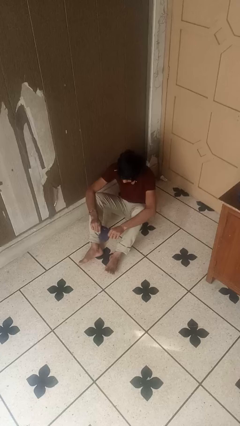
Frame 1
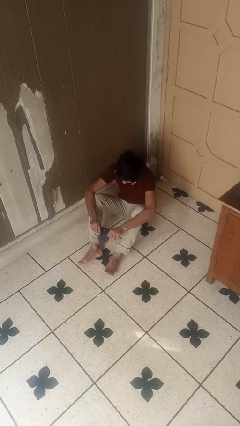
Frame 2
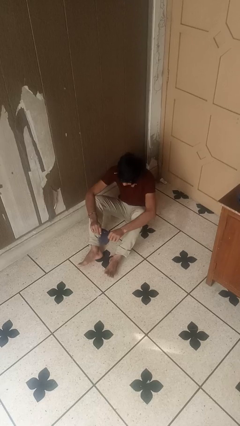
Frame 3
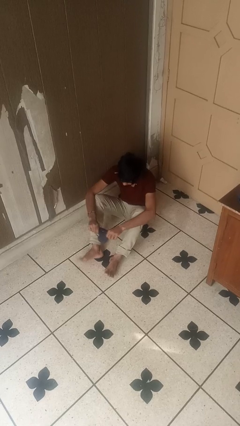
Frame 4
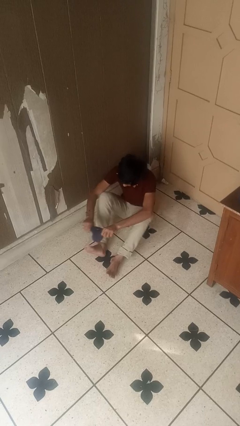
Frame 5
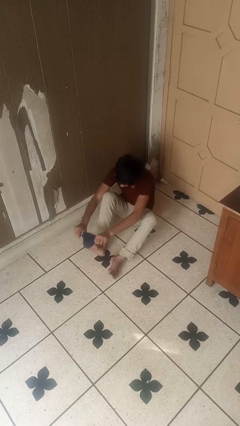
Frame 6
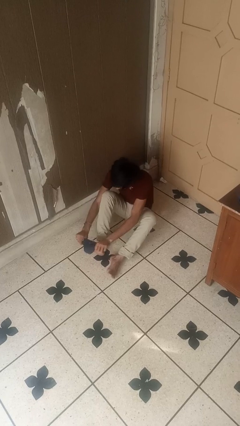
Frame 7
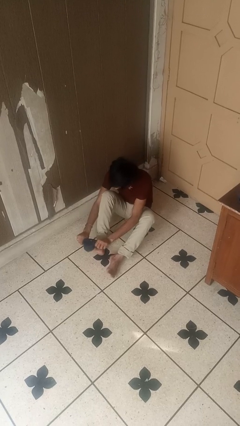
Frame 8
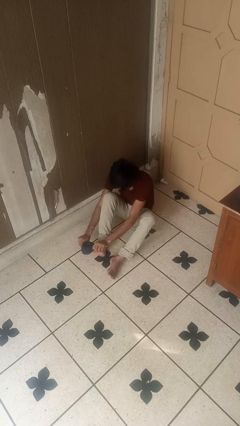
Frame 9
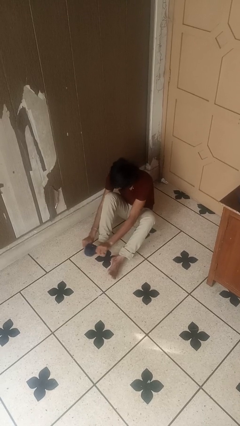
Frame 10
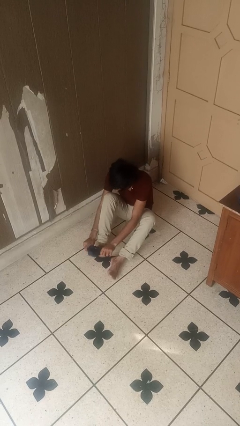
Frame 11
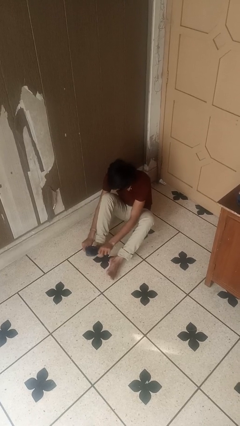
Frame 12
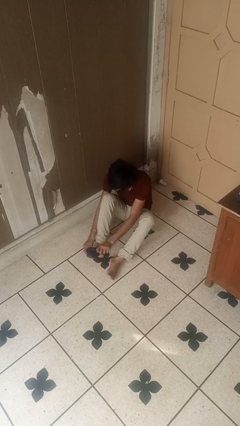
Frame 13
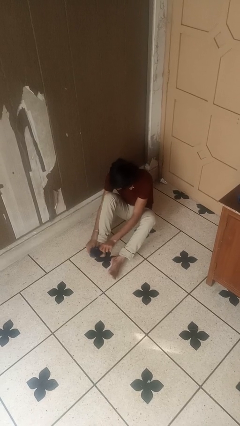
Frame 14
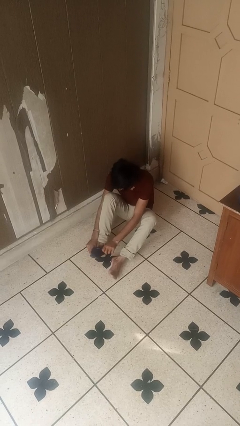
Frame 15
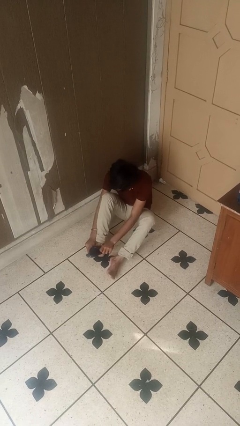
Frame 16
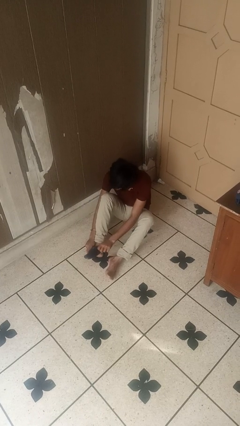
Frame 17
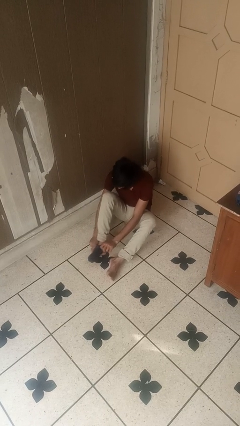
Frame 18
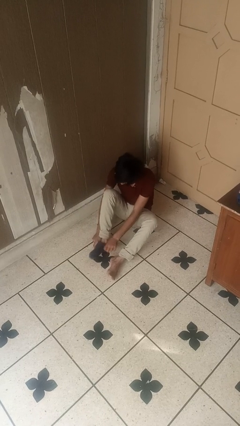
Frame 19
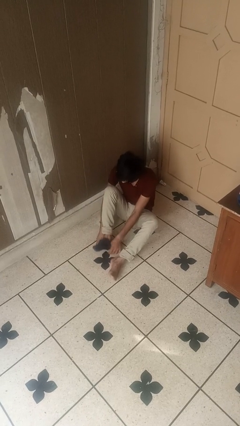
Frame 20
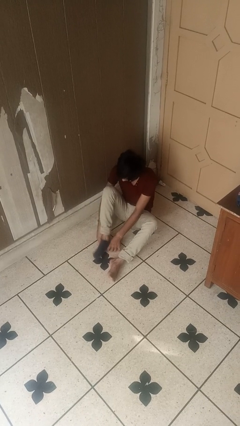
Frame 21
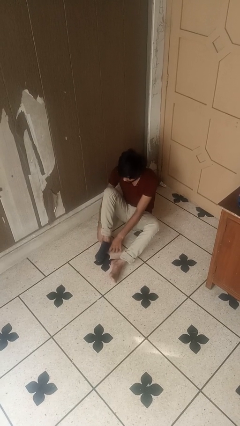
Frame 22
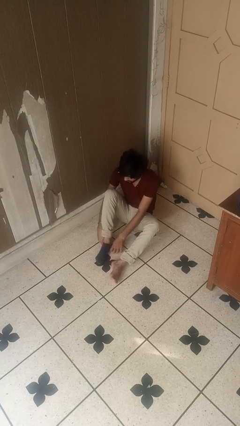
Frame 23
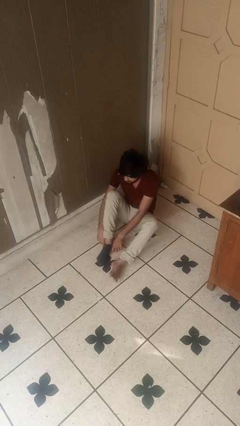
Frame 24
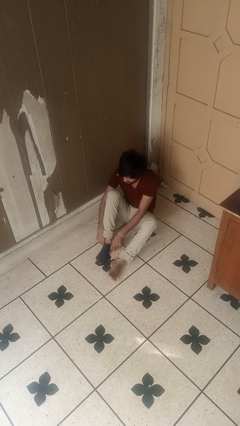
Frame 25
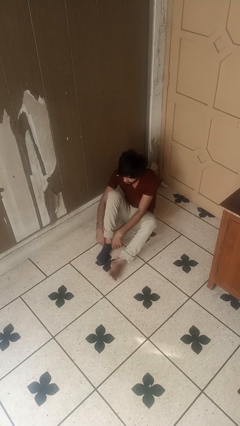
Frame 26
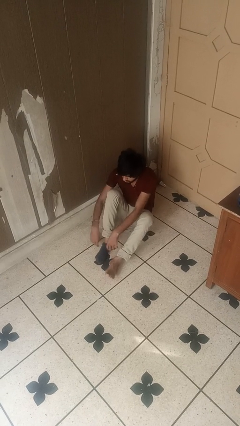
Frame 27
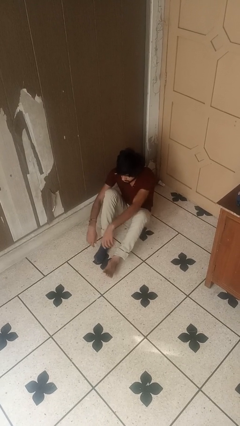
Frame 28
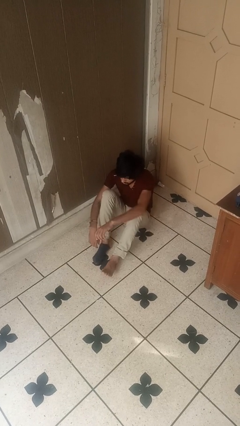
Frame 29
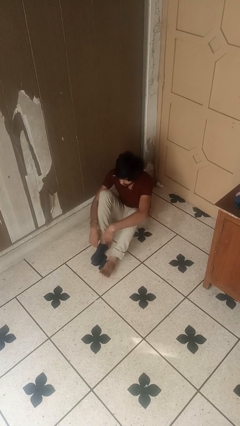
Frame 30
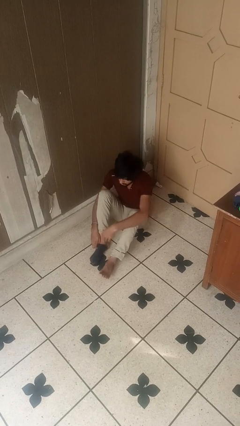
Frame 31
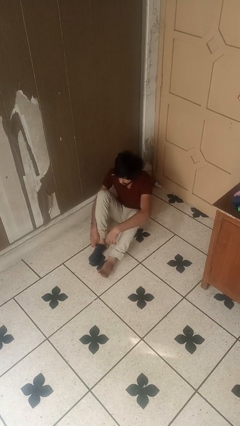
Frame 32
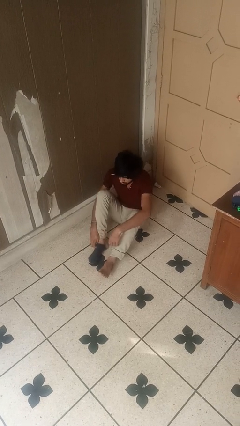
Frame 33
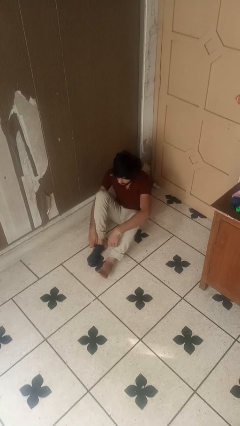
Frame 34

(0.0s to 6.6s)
person puts on socks

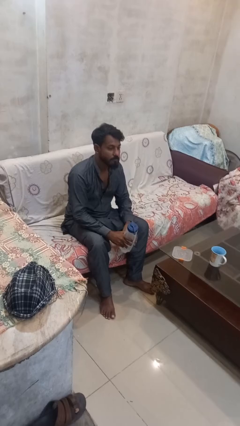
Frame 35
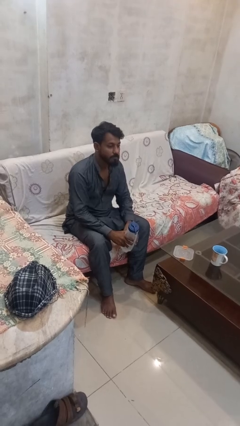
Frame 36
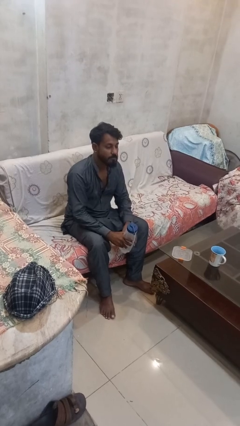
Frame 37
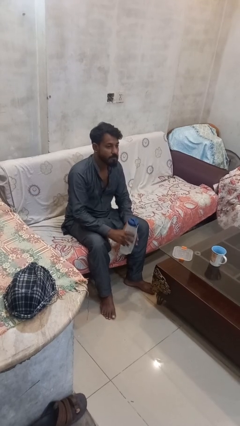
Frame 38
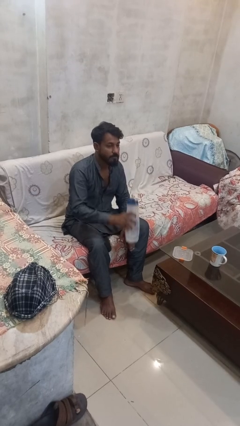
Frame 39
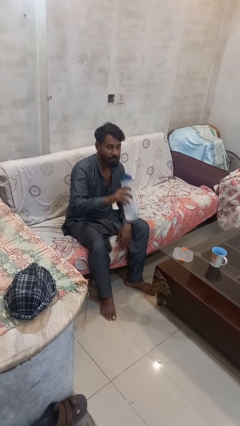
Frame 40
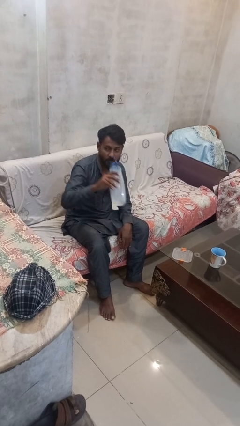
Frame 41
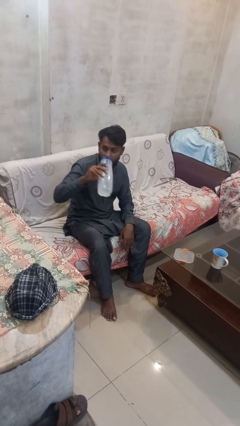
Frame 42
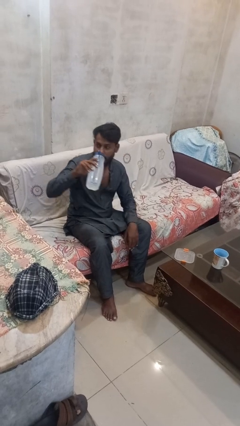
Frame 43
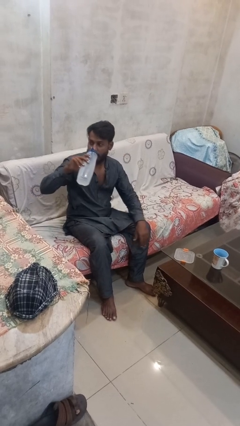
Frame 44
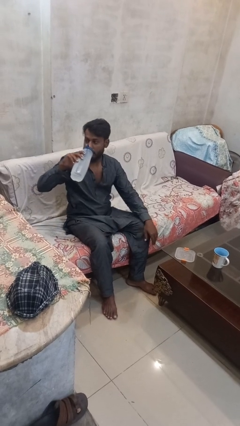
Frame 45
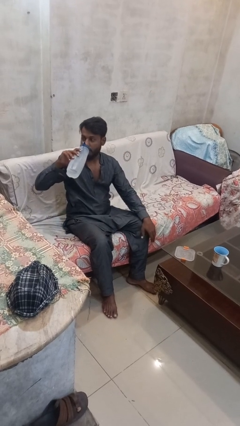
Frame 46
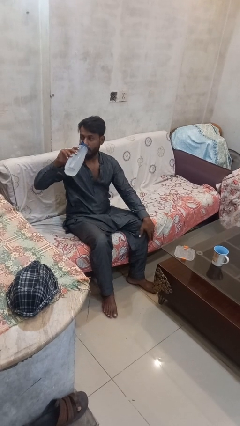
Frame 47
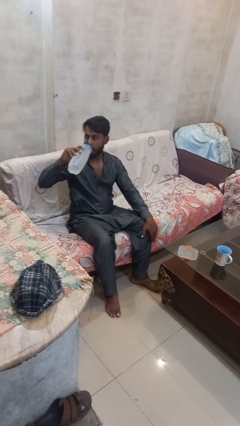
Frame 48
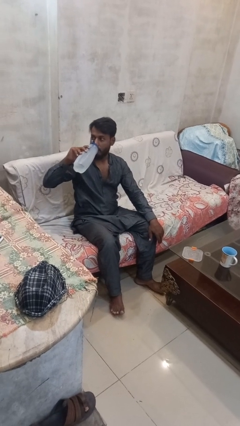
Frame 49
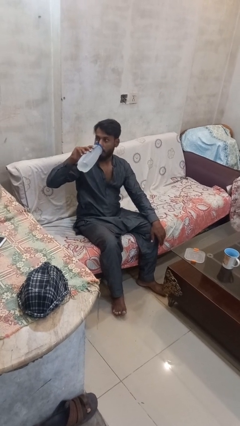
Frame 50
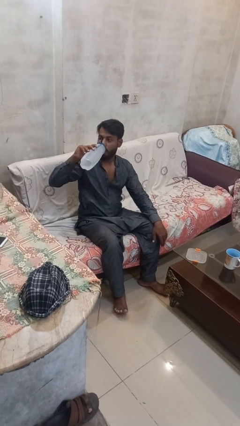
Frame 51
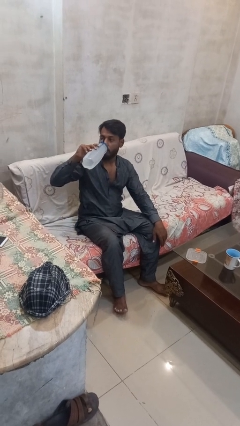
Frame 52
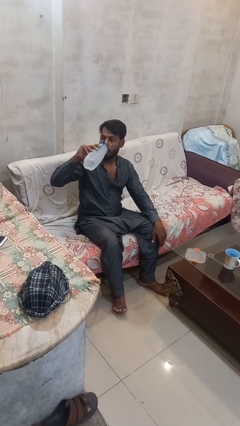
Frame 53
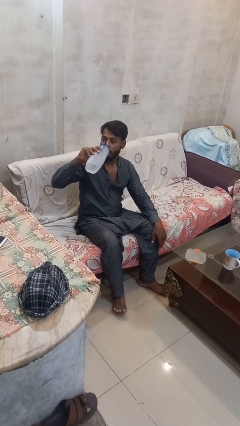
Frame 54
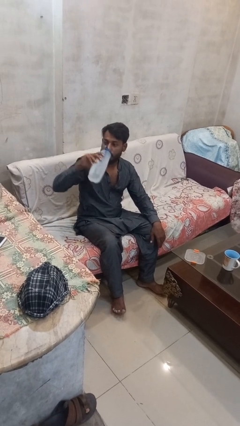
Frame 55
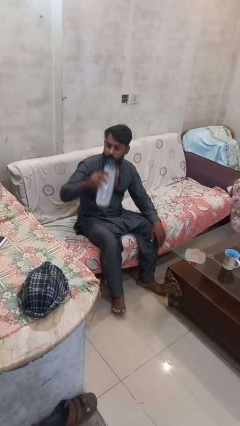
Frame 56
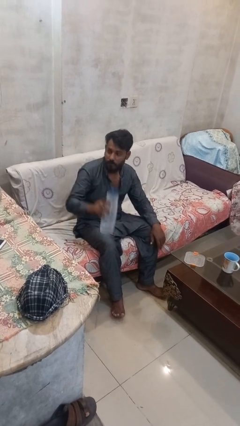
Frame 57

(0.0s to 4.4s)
person drinks from bottle

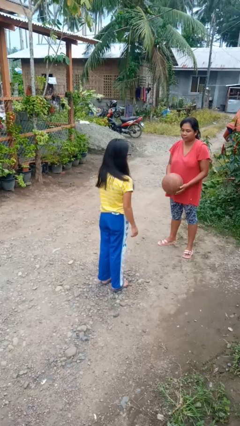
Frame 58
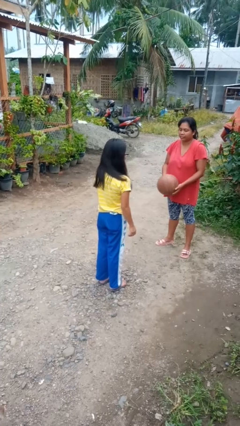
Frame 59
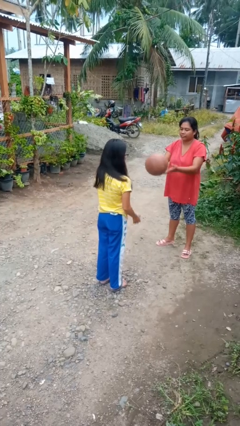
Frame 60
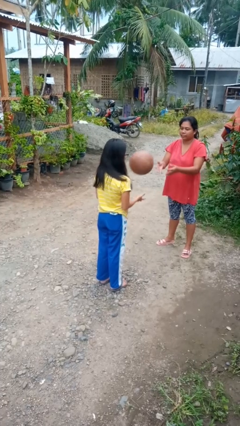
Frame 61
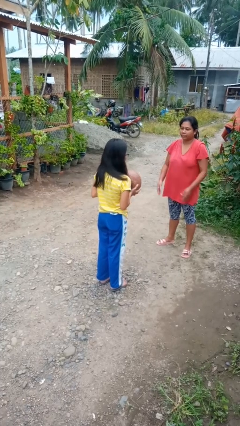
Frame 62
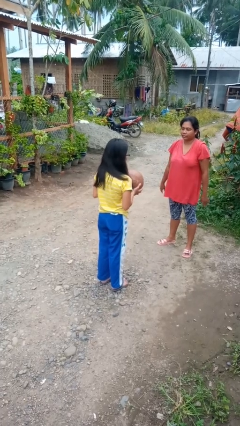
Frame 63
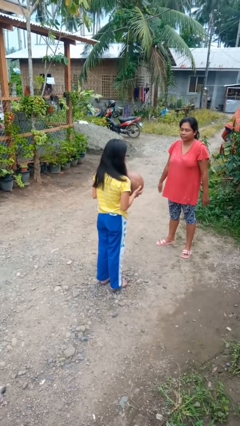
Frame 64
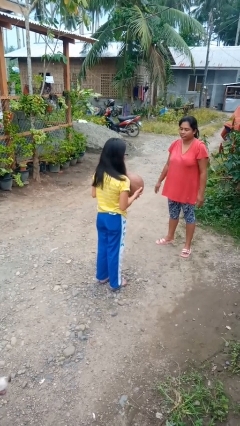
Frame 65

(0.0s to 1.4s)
person catches object from person

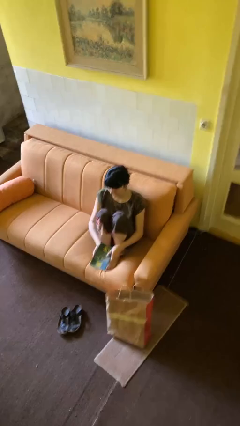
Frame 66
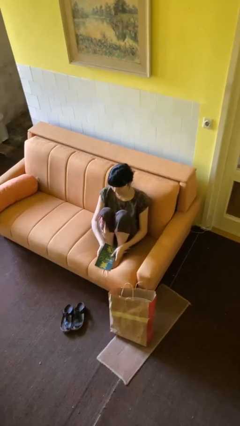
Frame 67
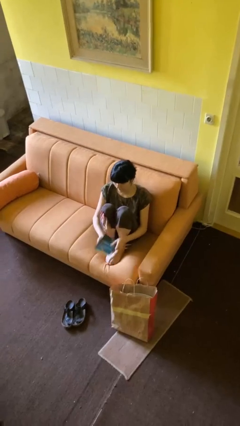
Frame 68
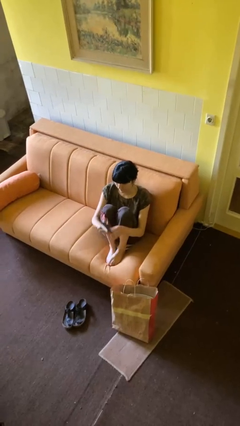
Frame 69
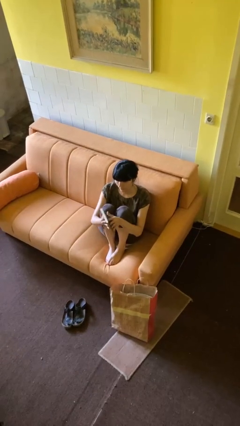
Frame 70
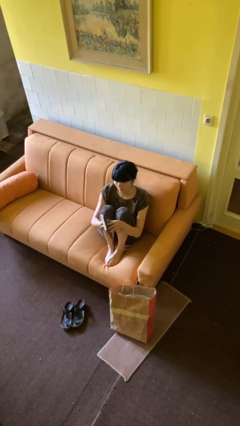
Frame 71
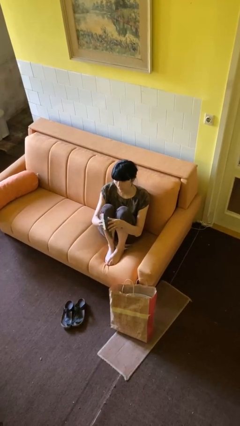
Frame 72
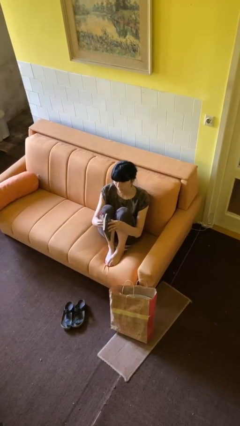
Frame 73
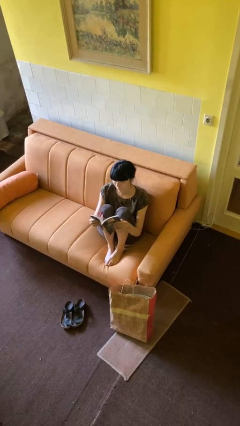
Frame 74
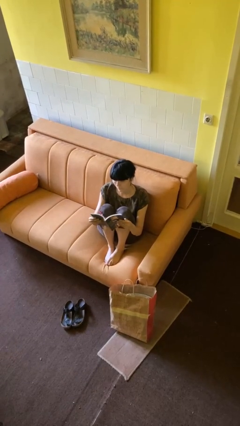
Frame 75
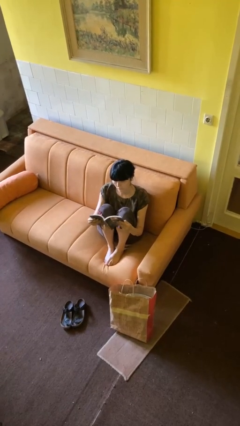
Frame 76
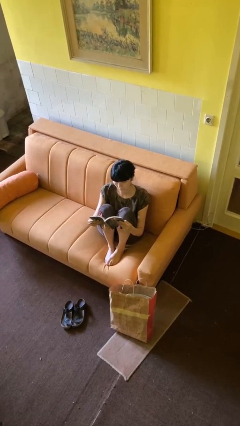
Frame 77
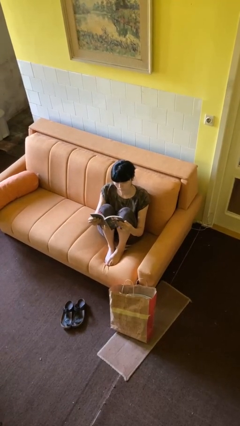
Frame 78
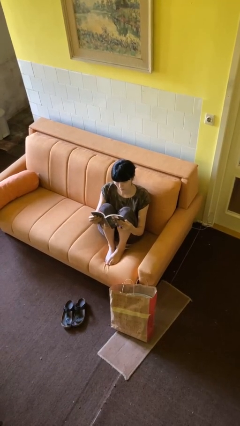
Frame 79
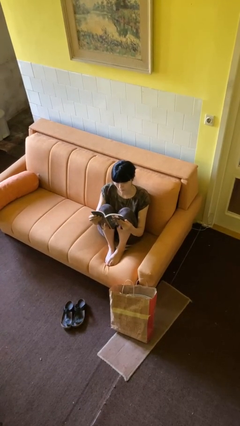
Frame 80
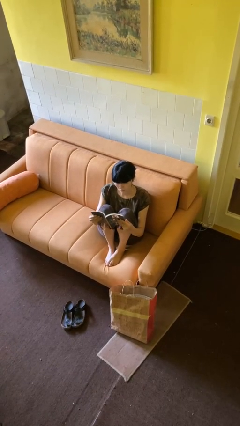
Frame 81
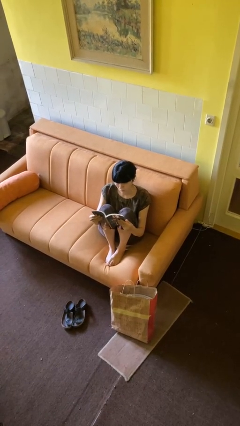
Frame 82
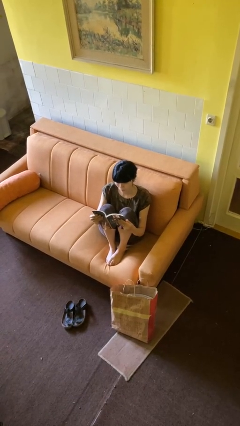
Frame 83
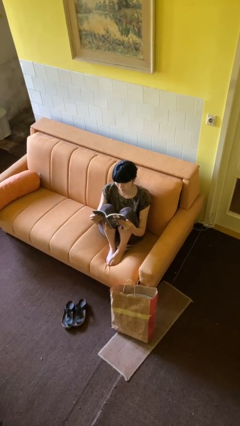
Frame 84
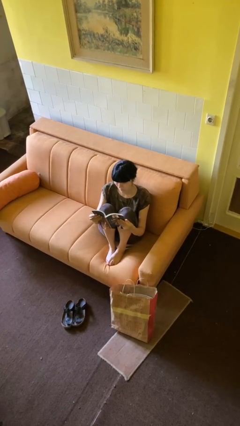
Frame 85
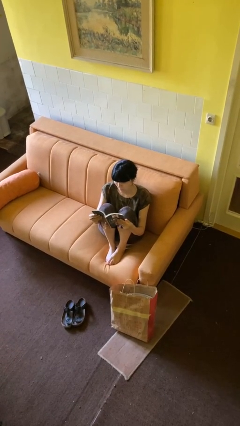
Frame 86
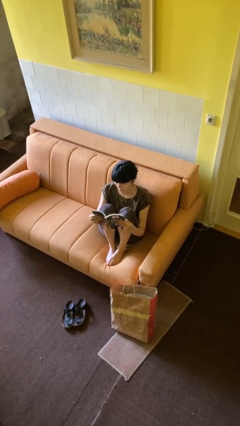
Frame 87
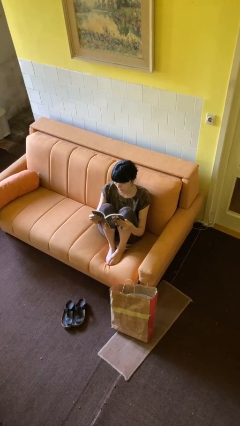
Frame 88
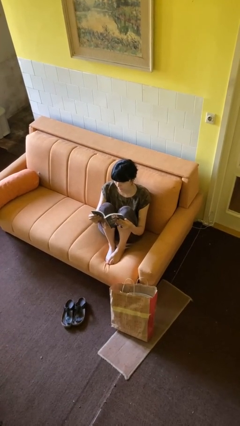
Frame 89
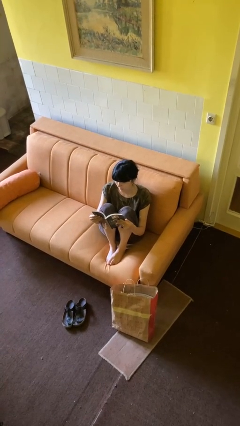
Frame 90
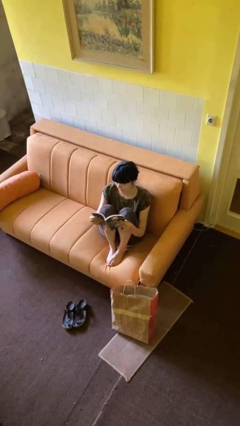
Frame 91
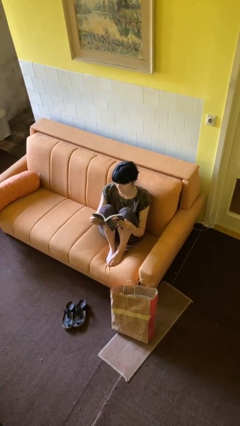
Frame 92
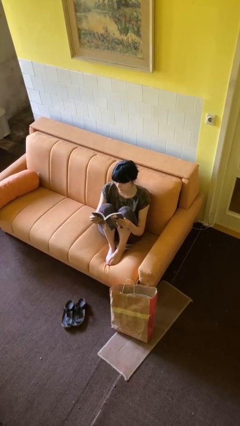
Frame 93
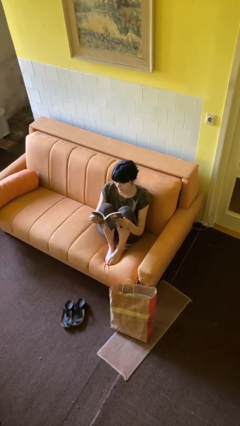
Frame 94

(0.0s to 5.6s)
person reads book

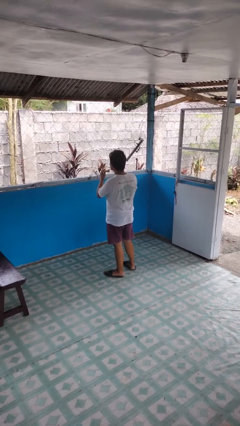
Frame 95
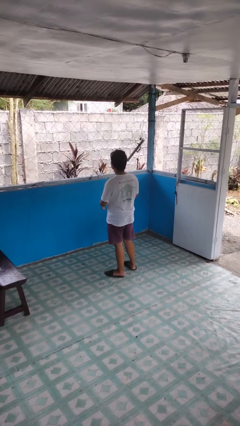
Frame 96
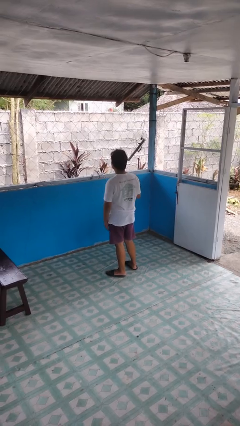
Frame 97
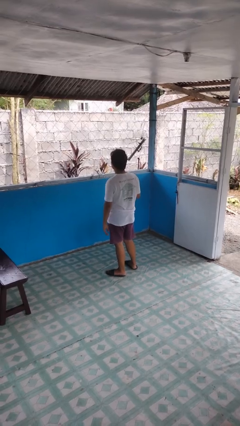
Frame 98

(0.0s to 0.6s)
person takes off sunglasses
